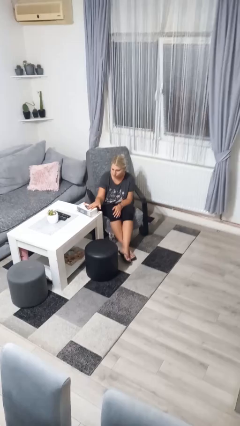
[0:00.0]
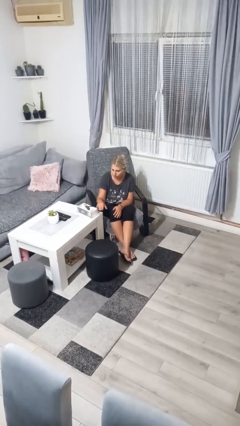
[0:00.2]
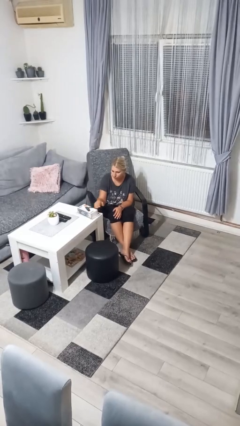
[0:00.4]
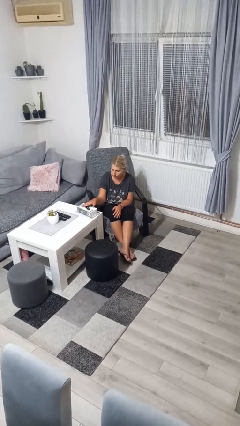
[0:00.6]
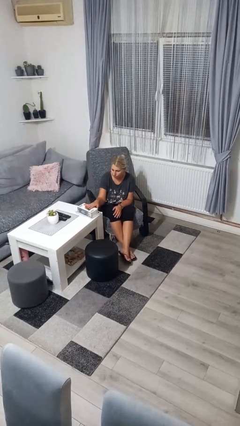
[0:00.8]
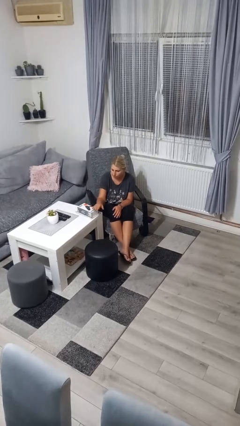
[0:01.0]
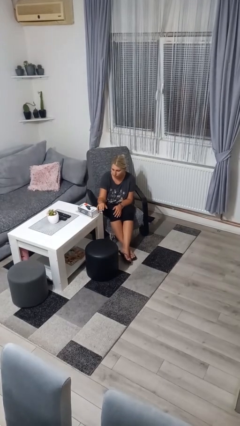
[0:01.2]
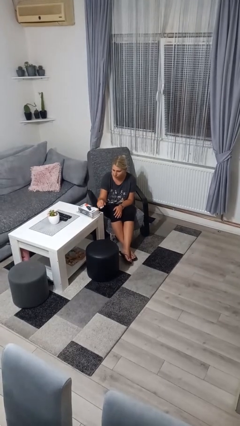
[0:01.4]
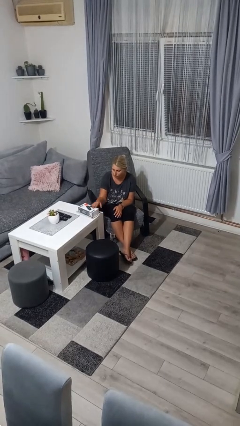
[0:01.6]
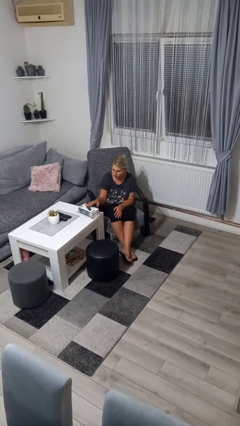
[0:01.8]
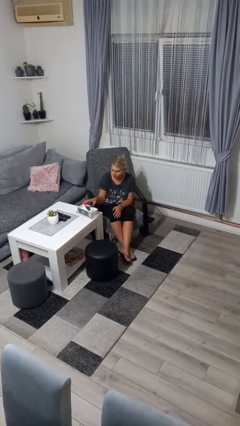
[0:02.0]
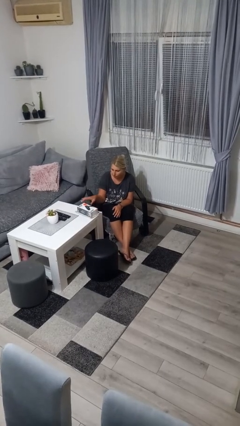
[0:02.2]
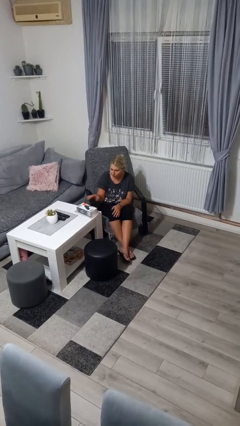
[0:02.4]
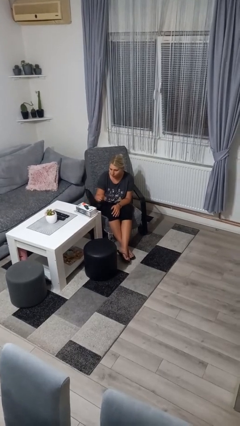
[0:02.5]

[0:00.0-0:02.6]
person waves hand over object

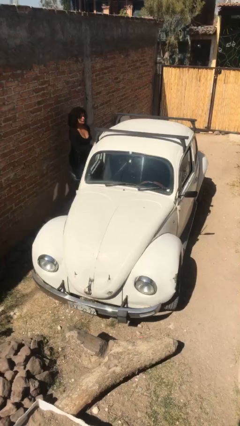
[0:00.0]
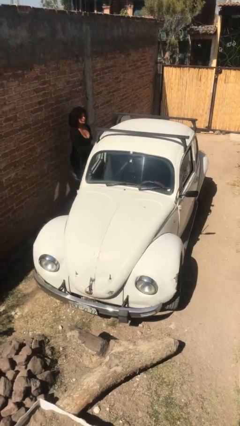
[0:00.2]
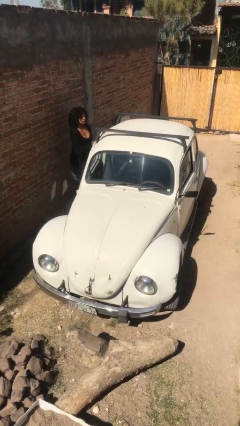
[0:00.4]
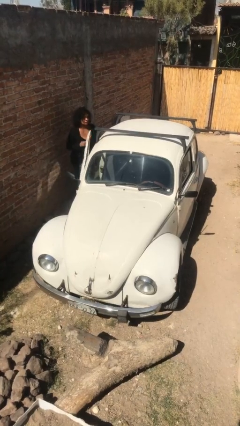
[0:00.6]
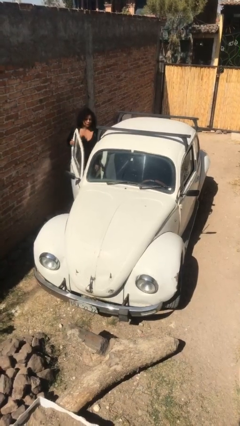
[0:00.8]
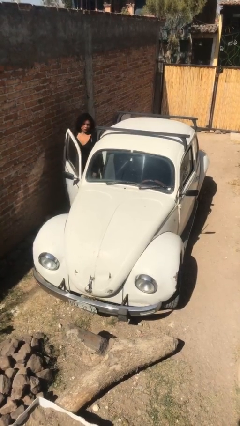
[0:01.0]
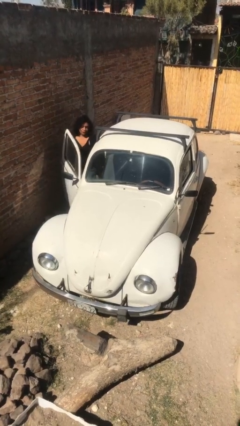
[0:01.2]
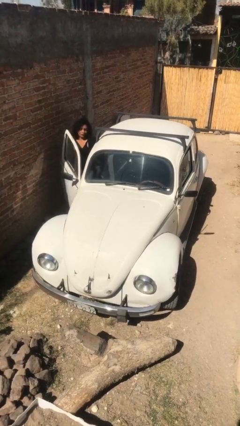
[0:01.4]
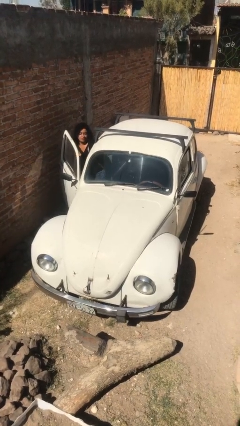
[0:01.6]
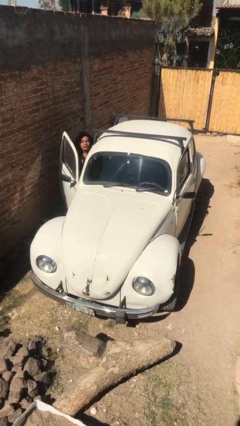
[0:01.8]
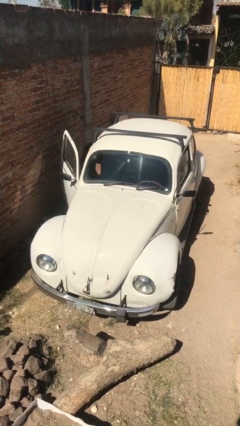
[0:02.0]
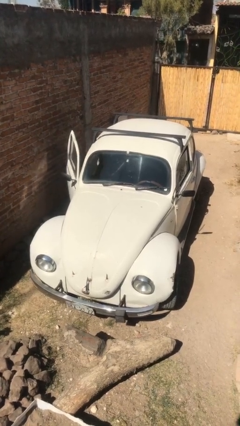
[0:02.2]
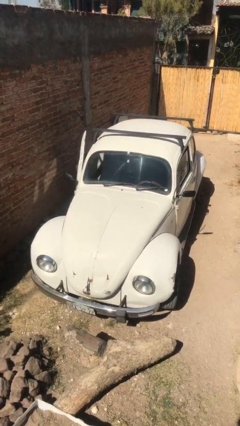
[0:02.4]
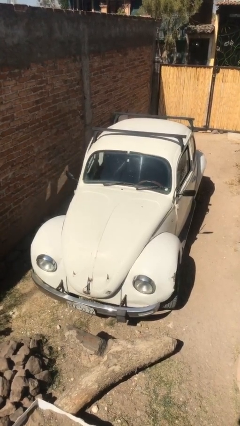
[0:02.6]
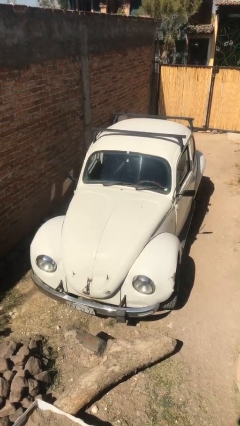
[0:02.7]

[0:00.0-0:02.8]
car picks up person

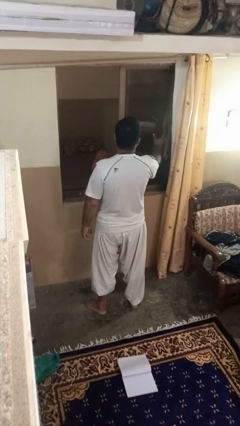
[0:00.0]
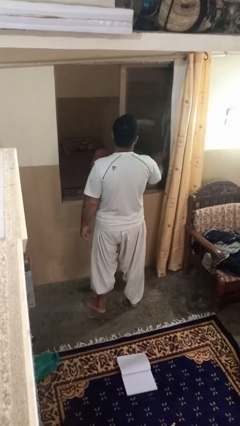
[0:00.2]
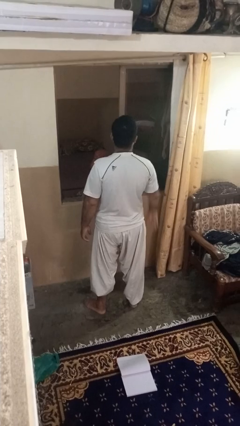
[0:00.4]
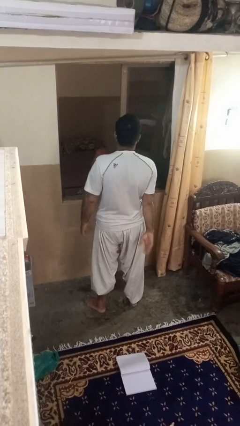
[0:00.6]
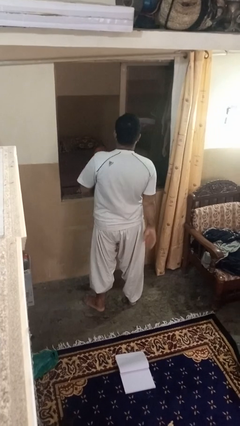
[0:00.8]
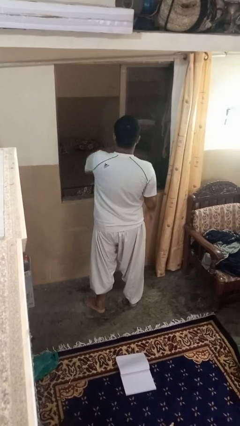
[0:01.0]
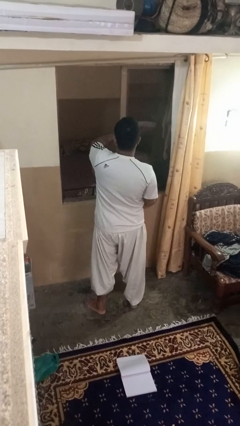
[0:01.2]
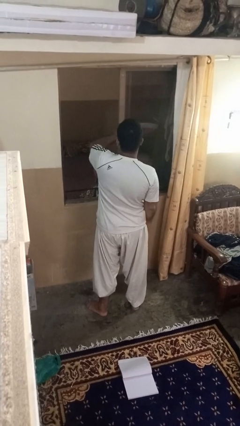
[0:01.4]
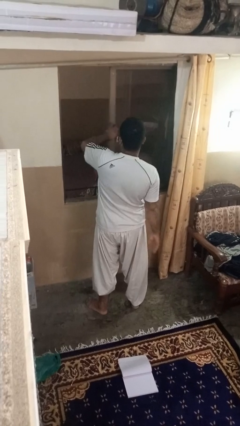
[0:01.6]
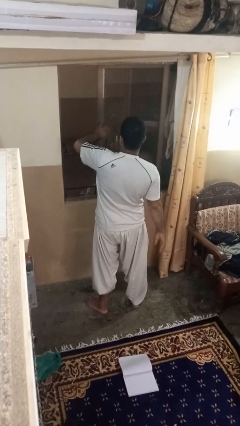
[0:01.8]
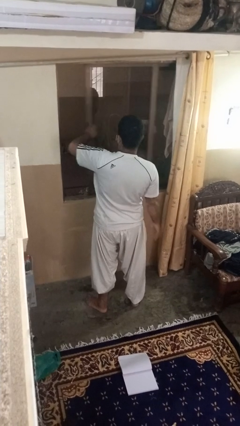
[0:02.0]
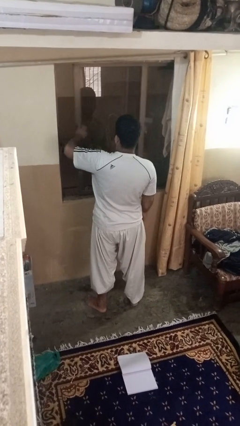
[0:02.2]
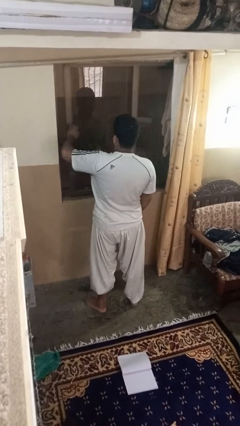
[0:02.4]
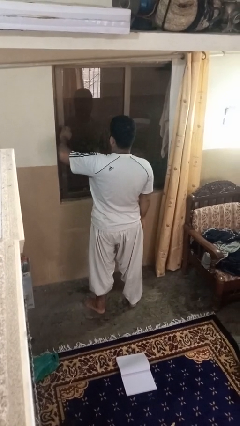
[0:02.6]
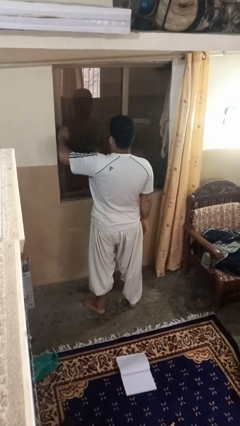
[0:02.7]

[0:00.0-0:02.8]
person closes home window

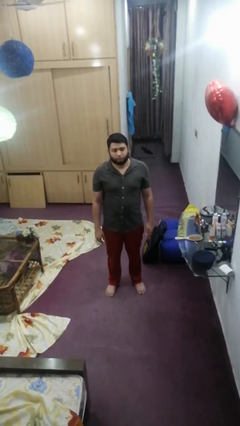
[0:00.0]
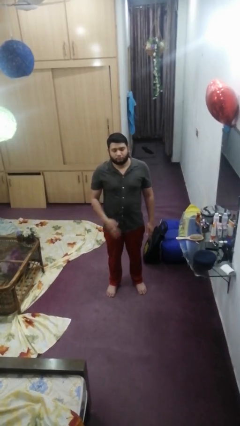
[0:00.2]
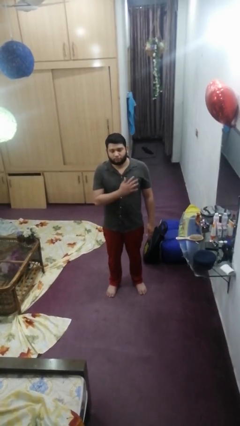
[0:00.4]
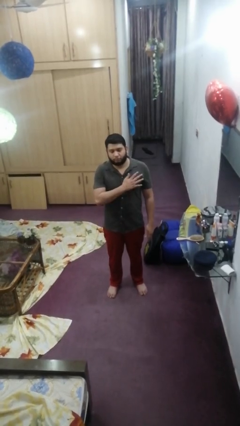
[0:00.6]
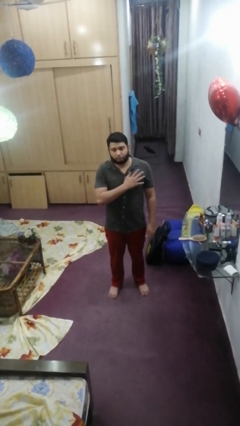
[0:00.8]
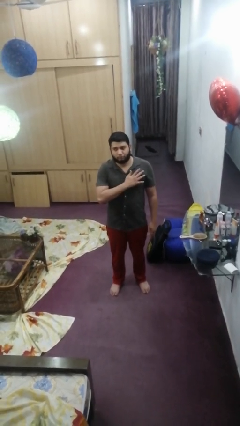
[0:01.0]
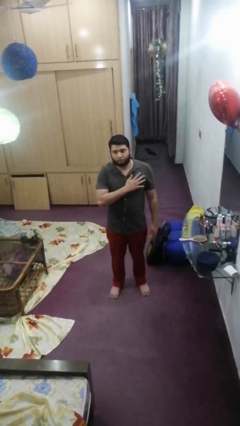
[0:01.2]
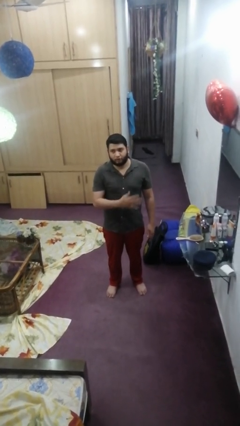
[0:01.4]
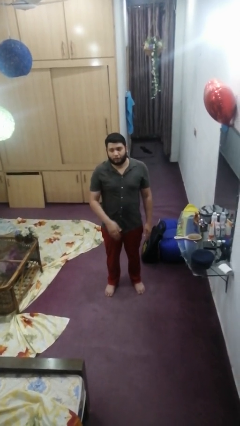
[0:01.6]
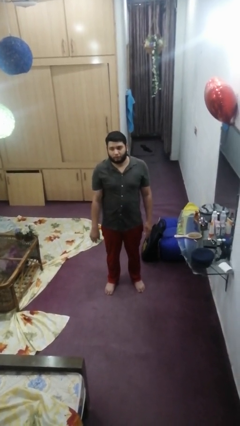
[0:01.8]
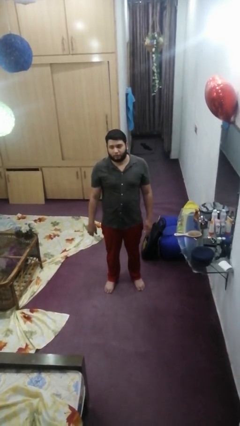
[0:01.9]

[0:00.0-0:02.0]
person drums on chest

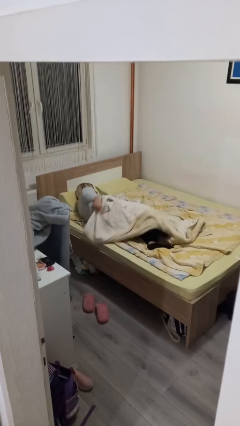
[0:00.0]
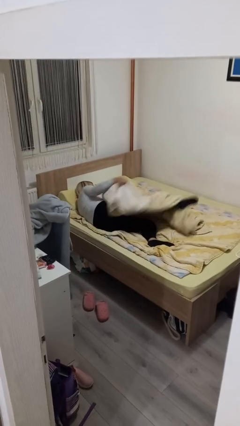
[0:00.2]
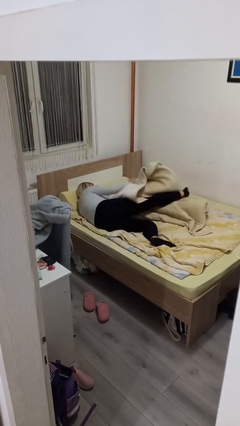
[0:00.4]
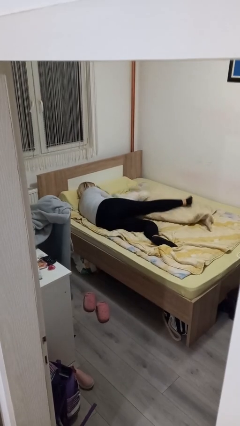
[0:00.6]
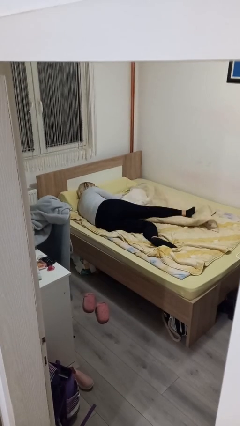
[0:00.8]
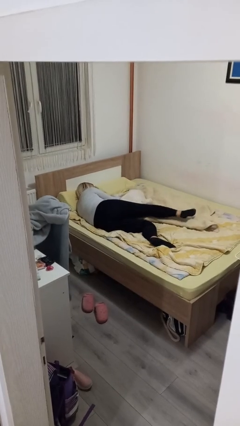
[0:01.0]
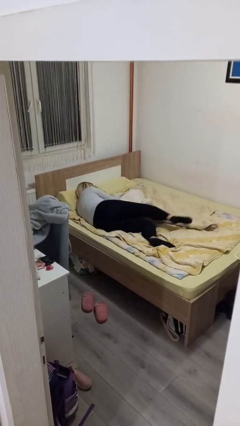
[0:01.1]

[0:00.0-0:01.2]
person uncovers with bedsheets

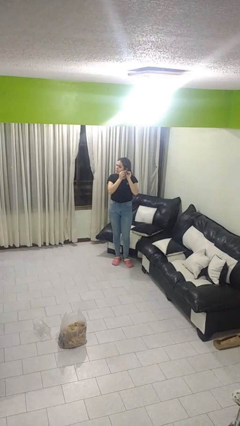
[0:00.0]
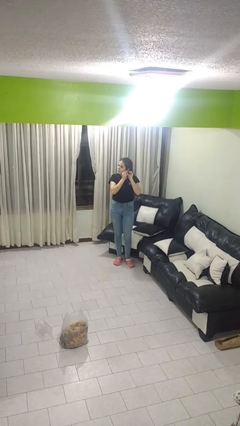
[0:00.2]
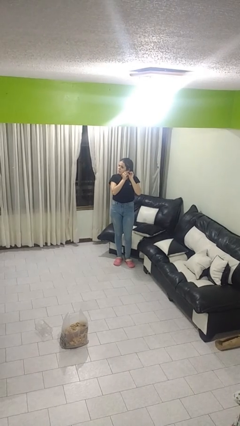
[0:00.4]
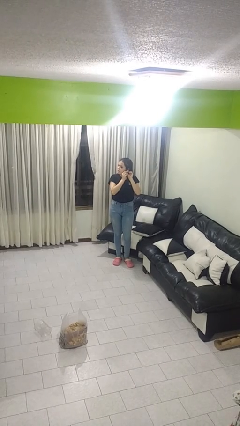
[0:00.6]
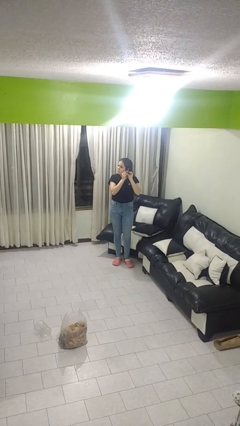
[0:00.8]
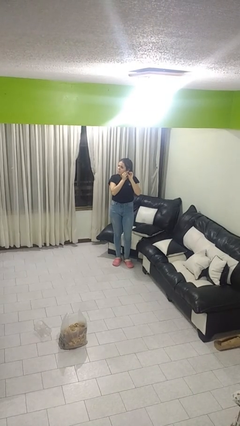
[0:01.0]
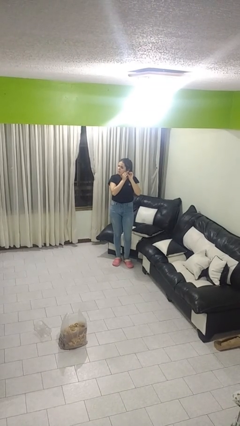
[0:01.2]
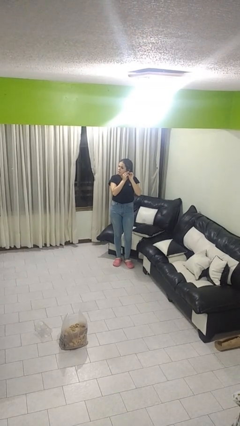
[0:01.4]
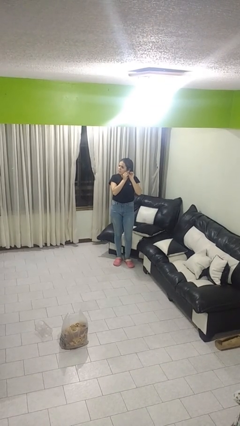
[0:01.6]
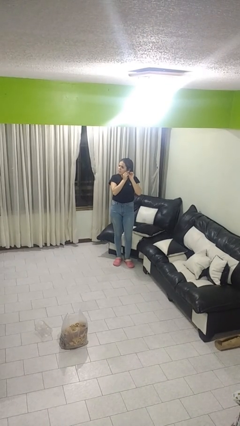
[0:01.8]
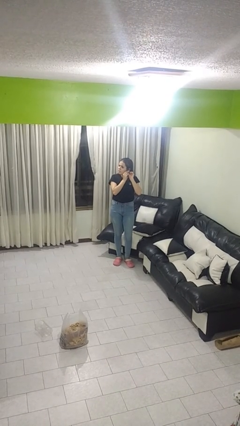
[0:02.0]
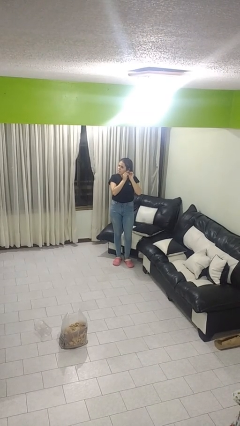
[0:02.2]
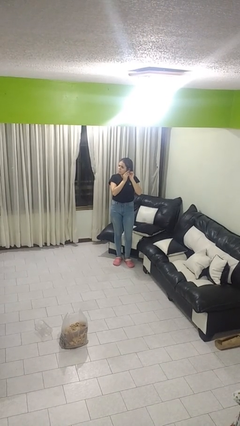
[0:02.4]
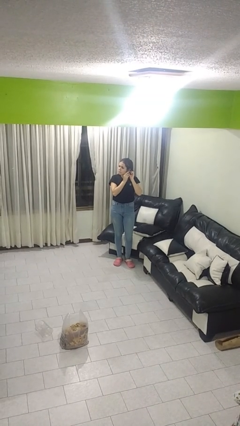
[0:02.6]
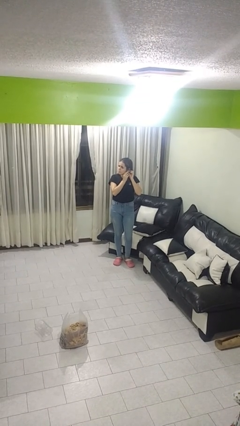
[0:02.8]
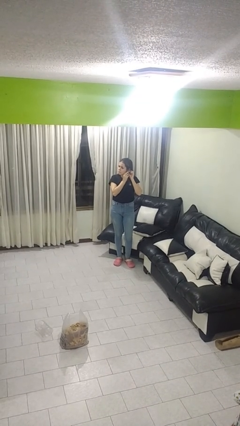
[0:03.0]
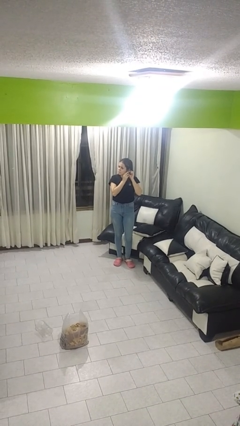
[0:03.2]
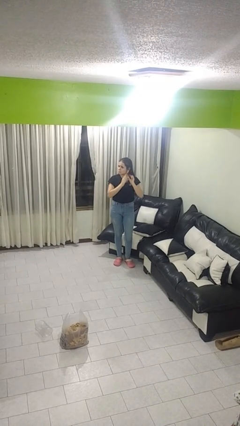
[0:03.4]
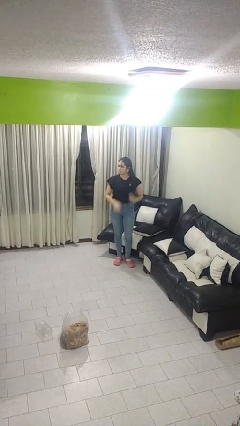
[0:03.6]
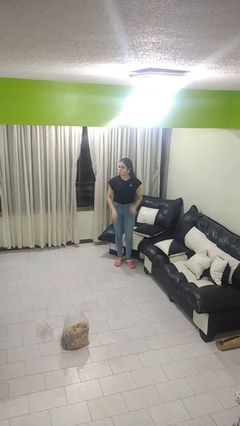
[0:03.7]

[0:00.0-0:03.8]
person puts on earrings

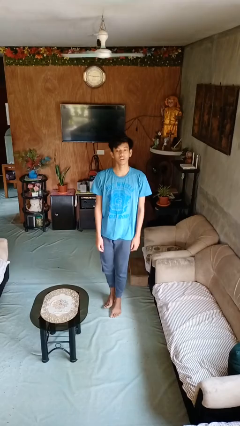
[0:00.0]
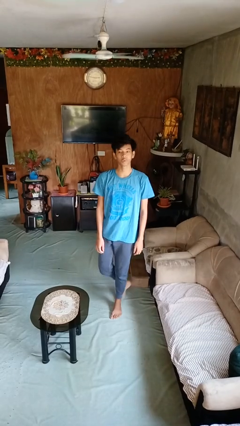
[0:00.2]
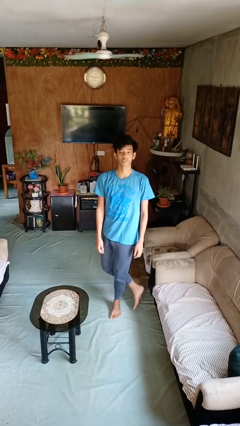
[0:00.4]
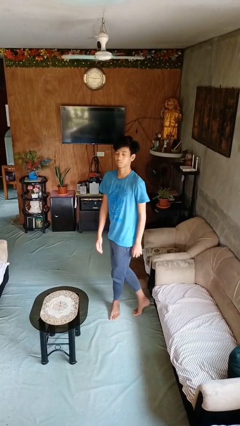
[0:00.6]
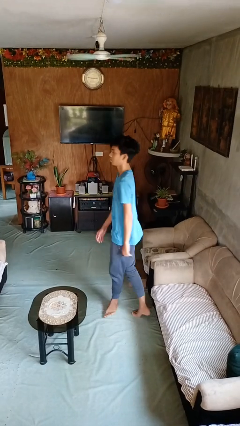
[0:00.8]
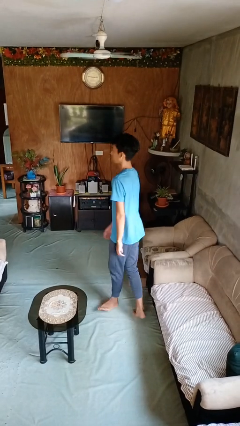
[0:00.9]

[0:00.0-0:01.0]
person twirls

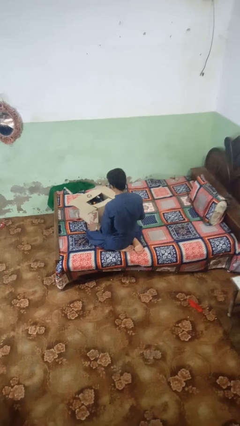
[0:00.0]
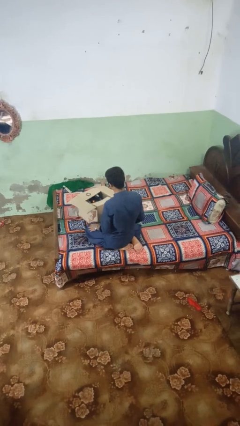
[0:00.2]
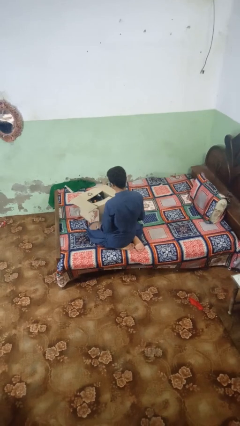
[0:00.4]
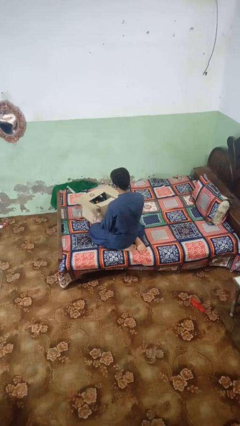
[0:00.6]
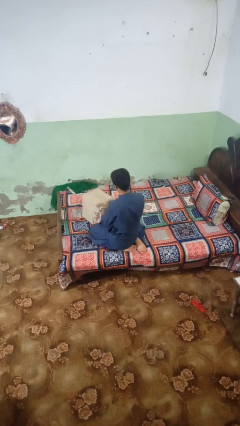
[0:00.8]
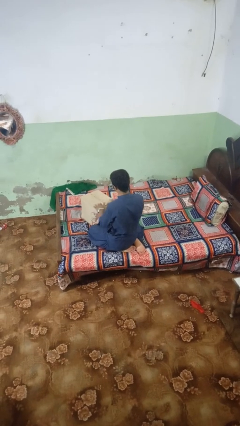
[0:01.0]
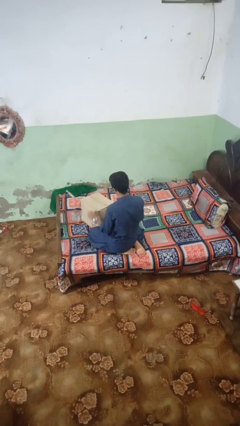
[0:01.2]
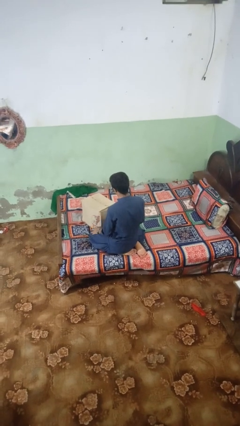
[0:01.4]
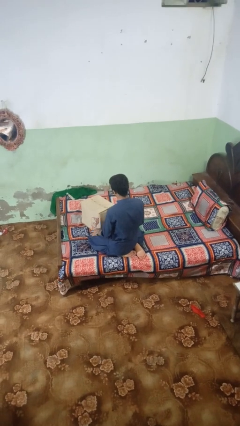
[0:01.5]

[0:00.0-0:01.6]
person closes box
